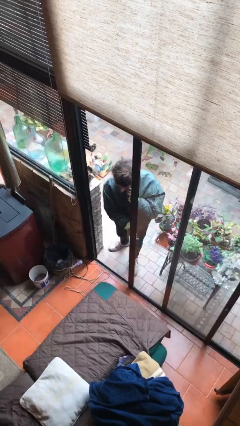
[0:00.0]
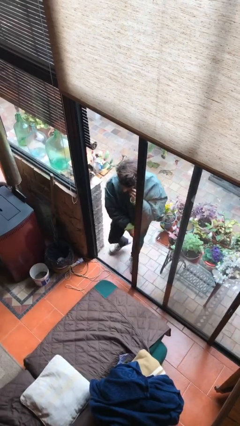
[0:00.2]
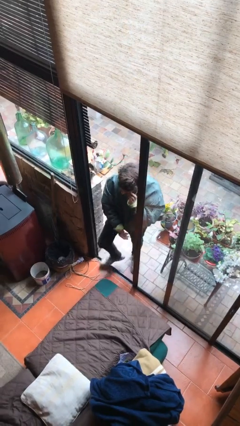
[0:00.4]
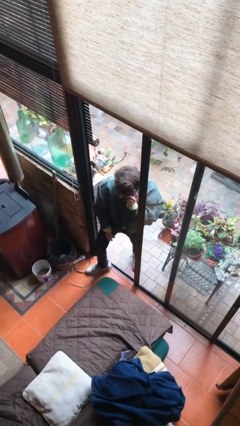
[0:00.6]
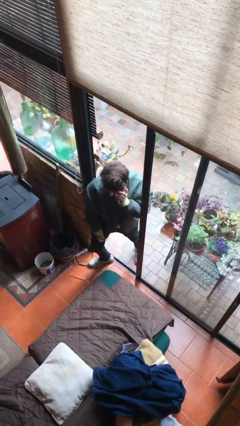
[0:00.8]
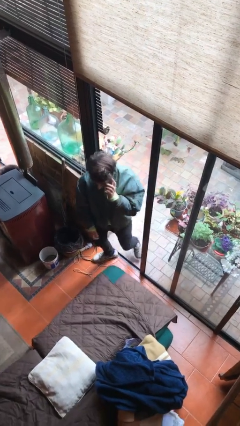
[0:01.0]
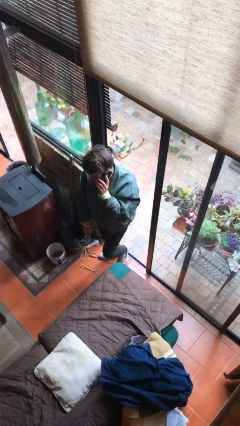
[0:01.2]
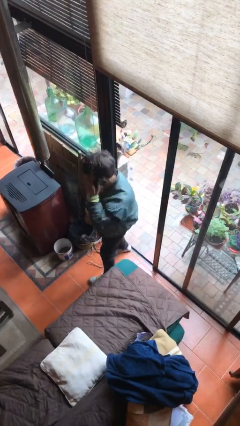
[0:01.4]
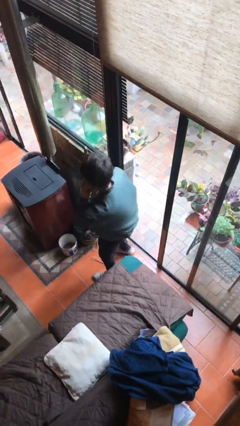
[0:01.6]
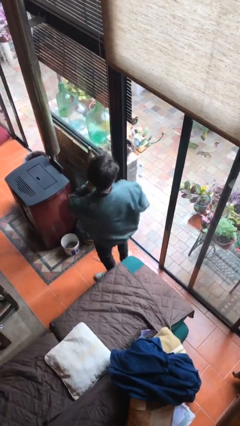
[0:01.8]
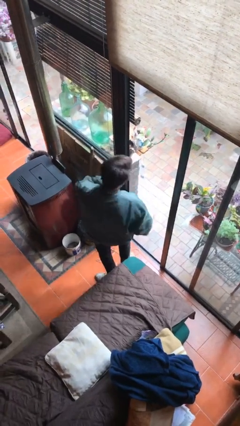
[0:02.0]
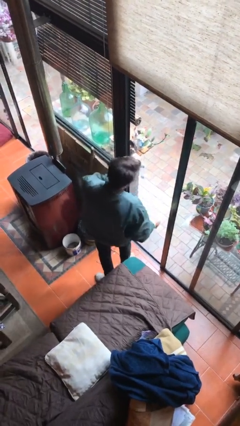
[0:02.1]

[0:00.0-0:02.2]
person enters scene through structure

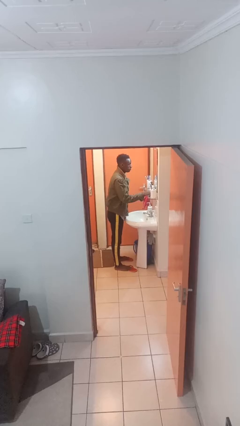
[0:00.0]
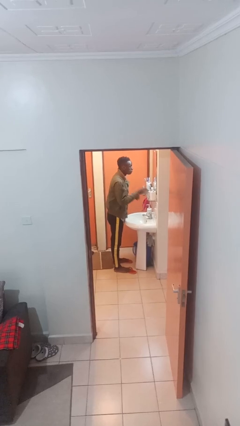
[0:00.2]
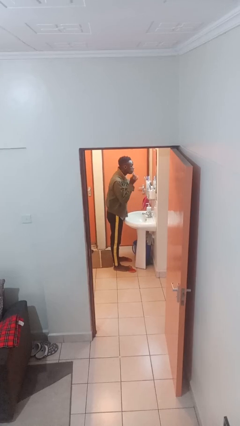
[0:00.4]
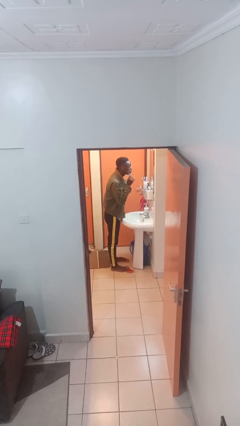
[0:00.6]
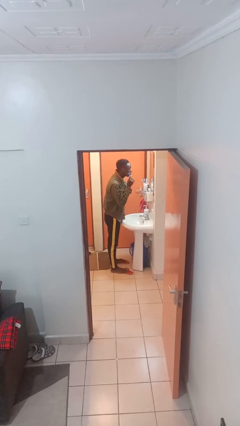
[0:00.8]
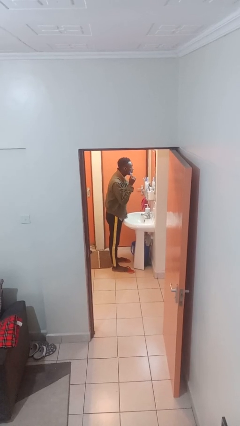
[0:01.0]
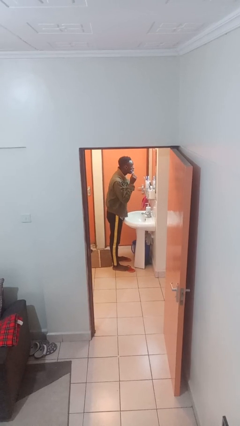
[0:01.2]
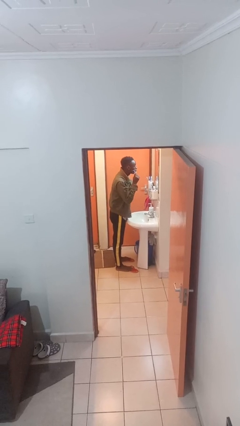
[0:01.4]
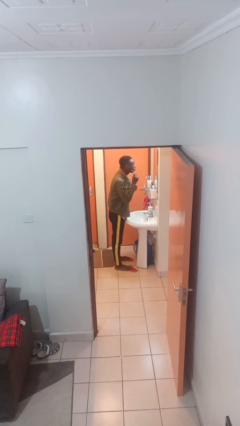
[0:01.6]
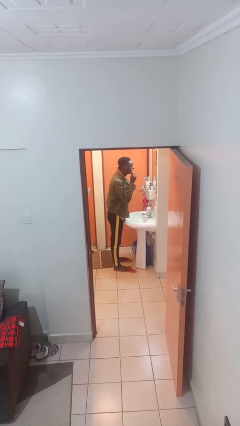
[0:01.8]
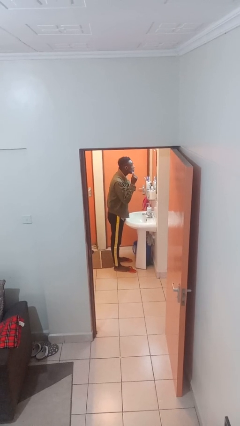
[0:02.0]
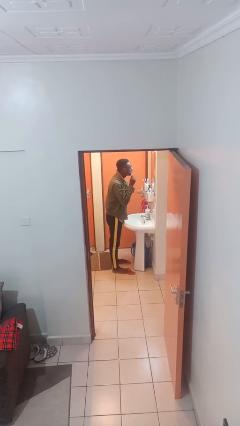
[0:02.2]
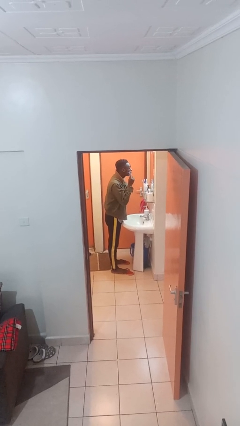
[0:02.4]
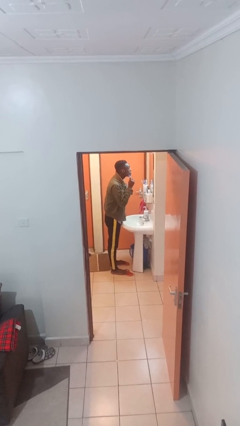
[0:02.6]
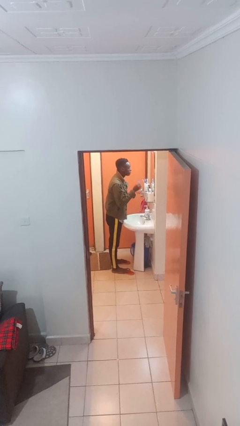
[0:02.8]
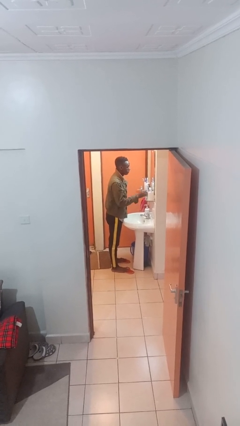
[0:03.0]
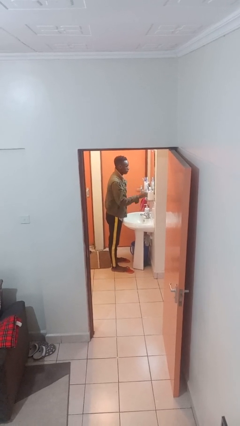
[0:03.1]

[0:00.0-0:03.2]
person shaves face

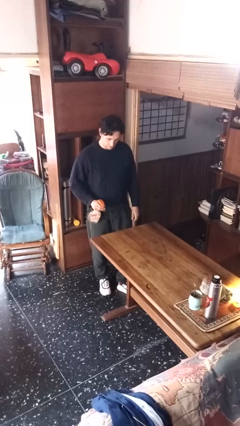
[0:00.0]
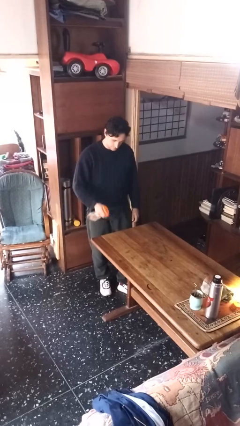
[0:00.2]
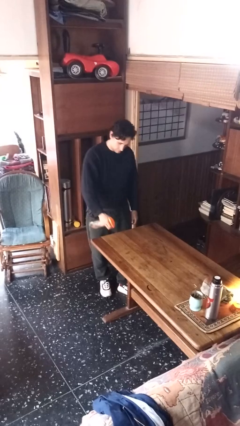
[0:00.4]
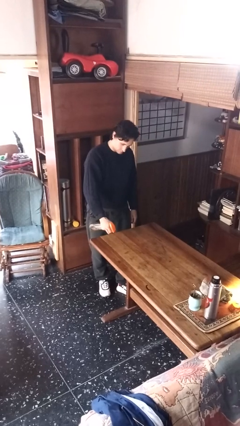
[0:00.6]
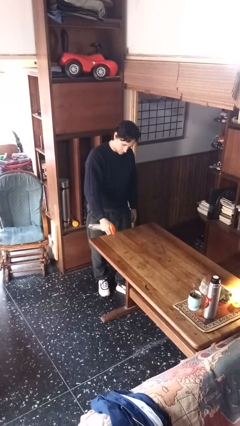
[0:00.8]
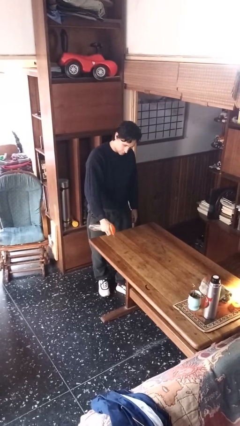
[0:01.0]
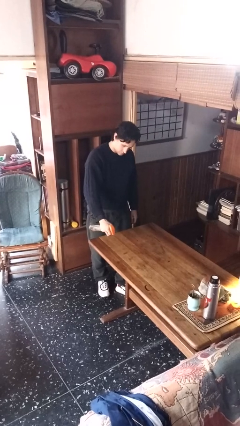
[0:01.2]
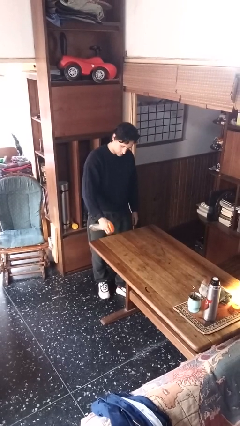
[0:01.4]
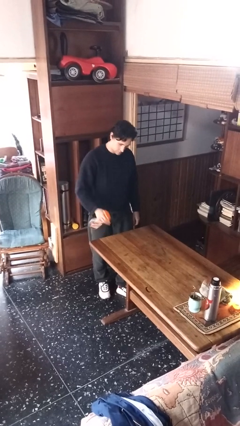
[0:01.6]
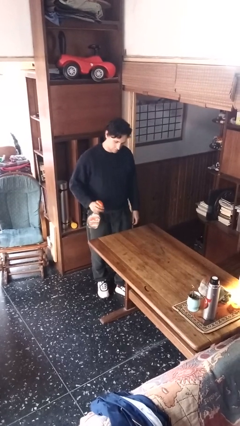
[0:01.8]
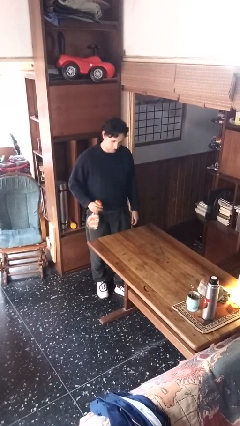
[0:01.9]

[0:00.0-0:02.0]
person sprays from bottle

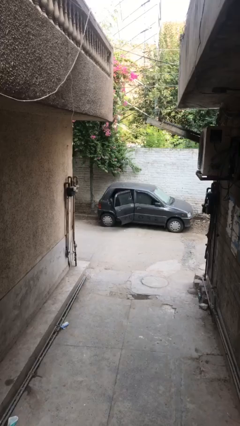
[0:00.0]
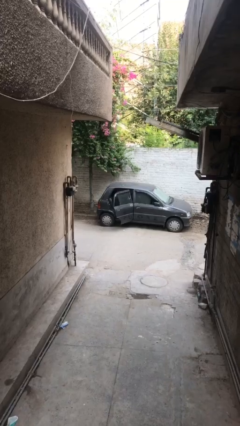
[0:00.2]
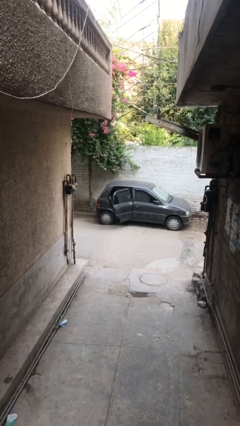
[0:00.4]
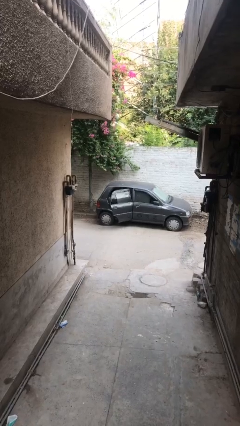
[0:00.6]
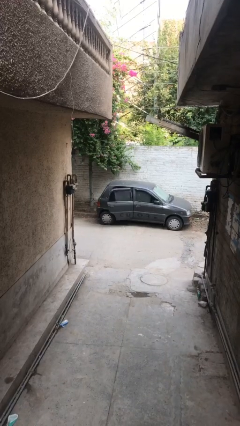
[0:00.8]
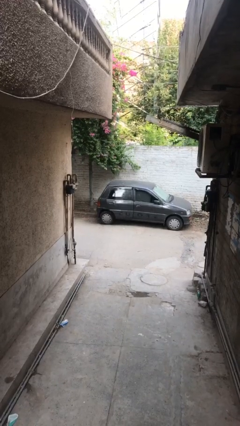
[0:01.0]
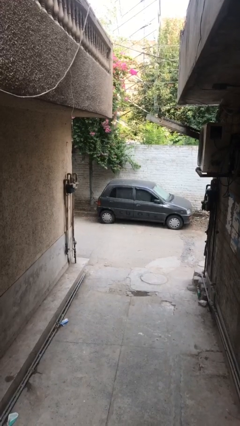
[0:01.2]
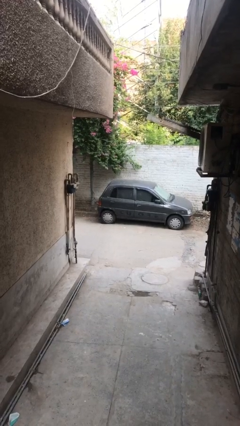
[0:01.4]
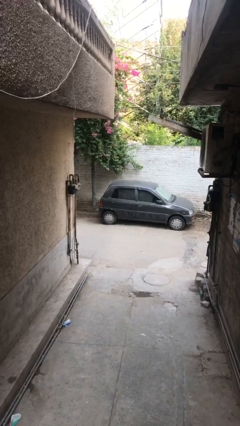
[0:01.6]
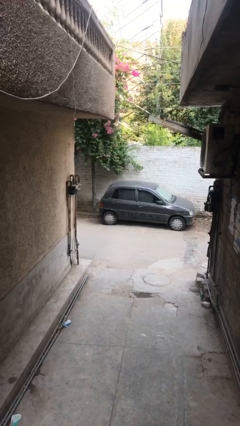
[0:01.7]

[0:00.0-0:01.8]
person closes car door

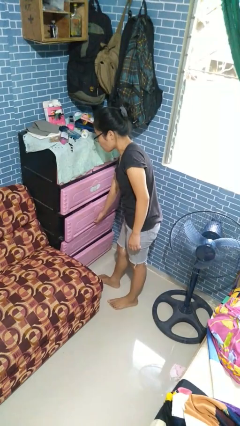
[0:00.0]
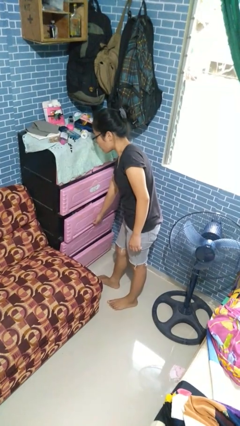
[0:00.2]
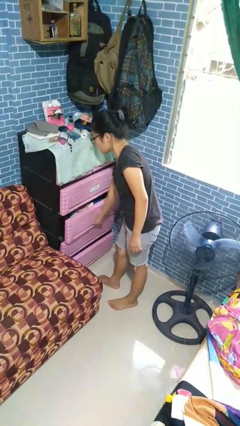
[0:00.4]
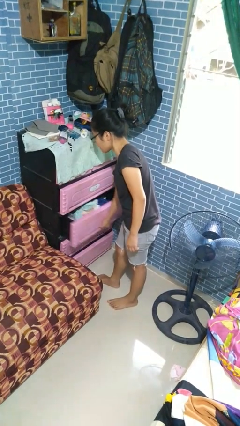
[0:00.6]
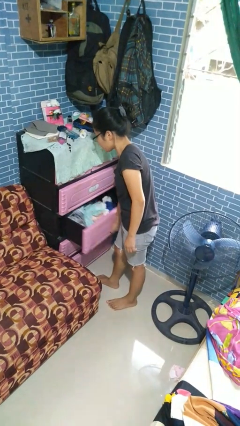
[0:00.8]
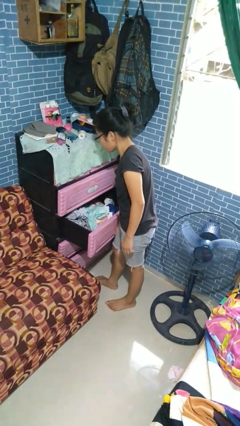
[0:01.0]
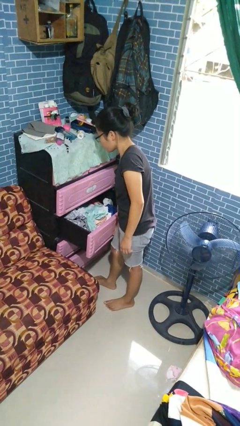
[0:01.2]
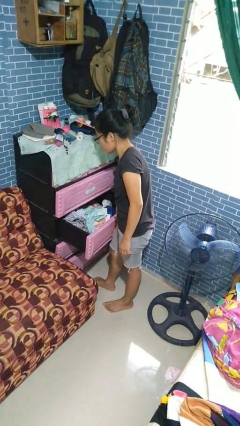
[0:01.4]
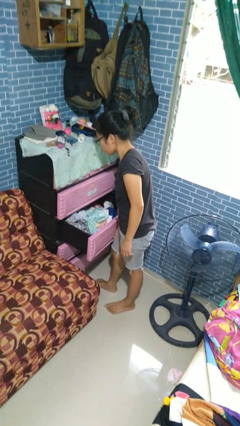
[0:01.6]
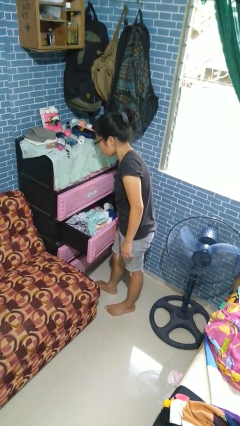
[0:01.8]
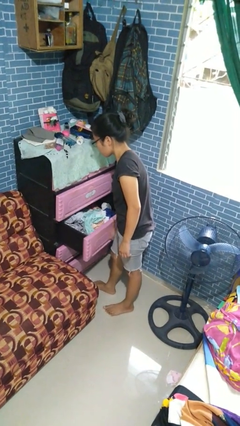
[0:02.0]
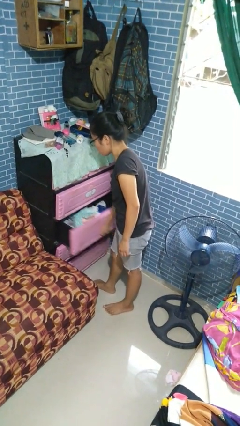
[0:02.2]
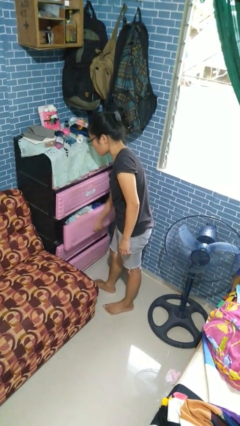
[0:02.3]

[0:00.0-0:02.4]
person opens dresser drawer

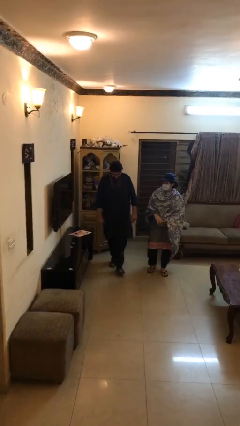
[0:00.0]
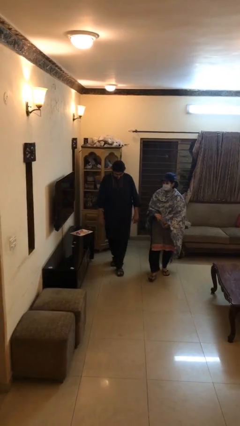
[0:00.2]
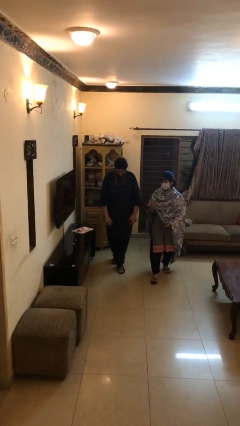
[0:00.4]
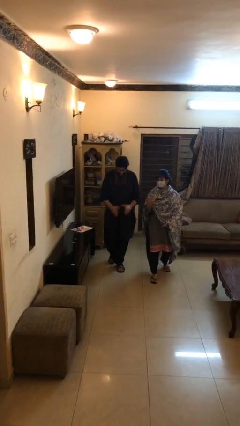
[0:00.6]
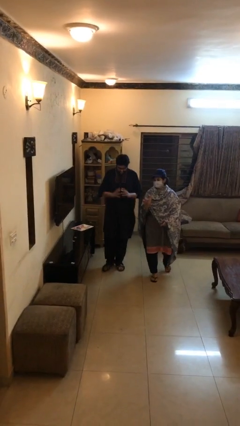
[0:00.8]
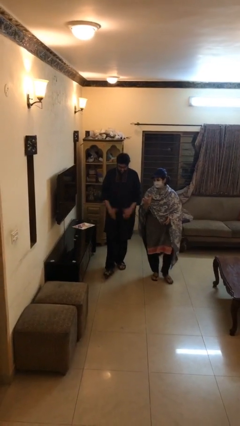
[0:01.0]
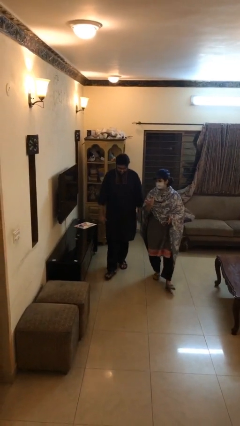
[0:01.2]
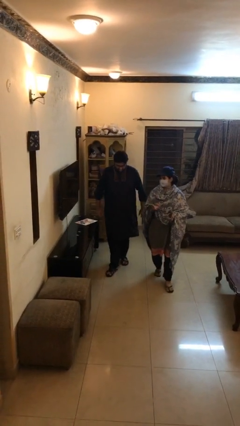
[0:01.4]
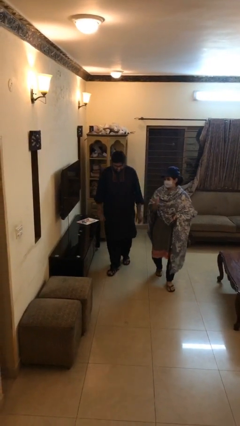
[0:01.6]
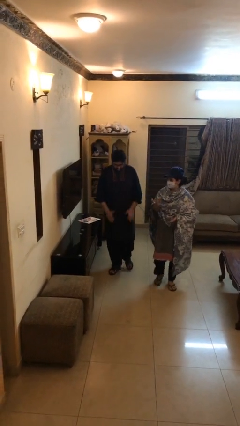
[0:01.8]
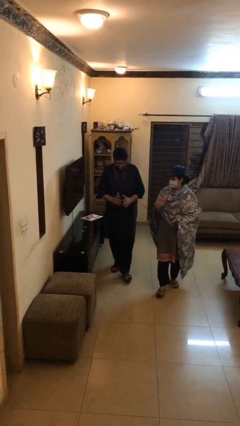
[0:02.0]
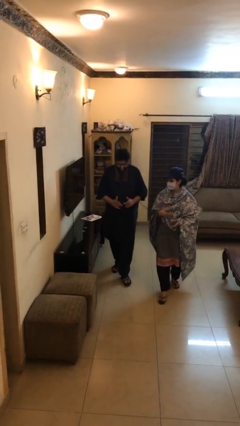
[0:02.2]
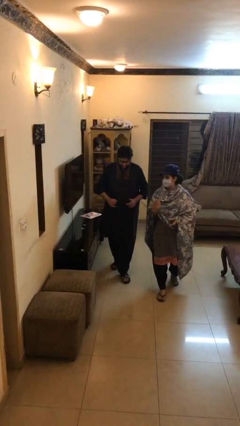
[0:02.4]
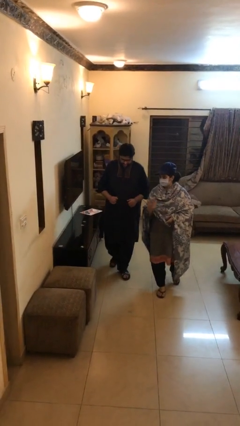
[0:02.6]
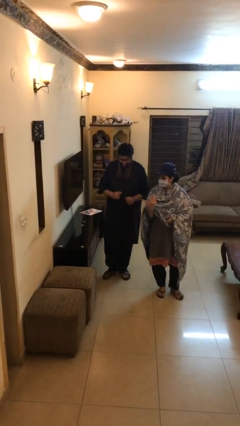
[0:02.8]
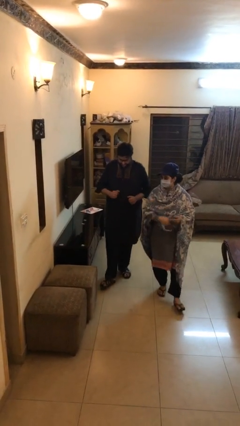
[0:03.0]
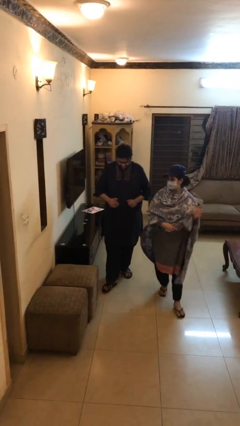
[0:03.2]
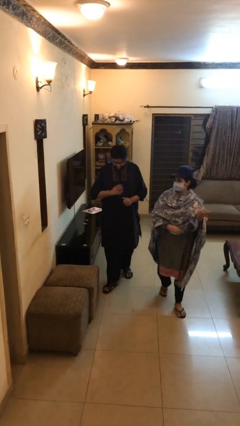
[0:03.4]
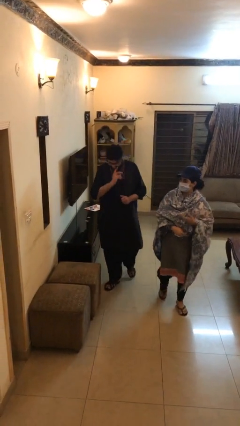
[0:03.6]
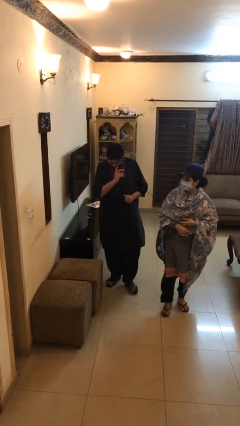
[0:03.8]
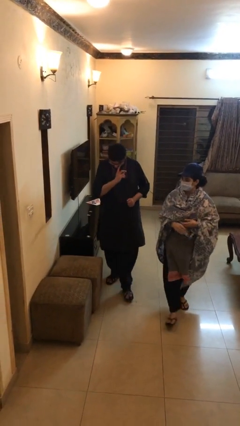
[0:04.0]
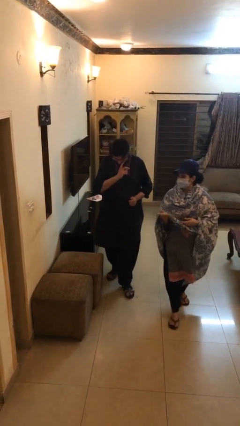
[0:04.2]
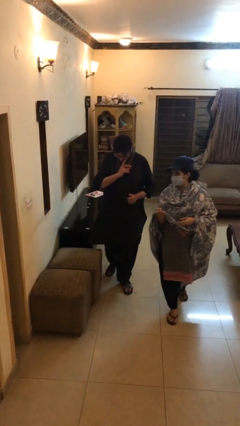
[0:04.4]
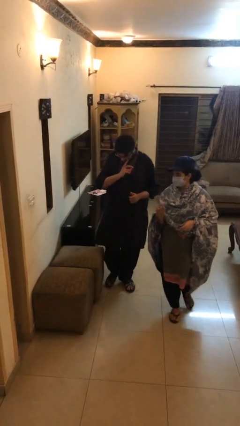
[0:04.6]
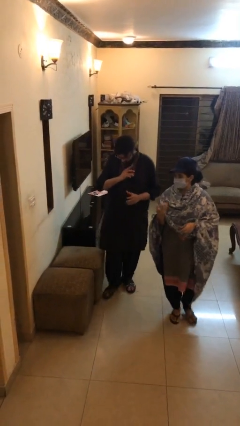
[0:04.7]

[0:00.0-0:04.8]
person talks to person

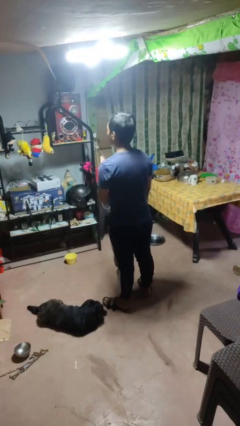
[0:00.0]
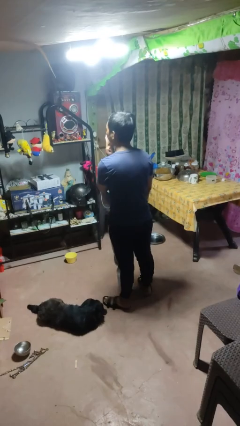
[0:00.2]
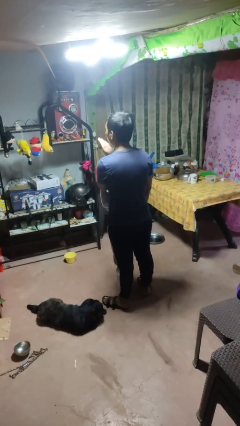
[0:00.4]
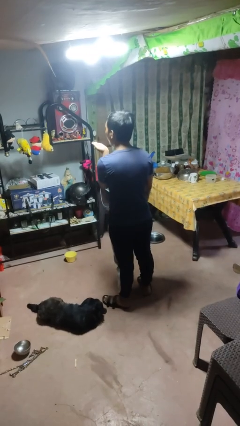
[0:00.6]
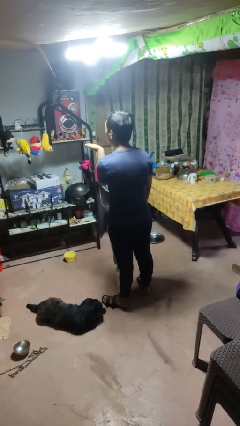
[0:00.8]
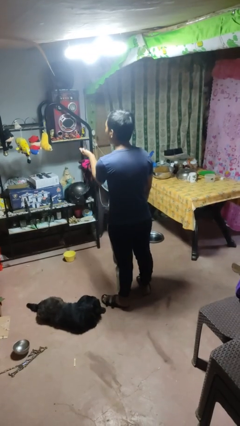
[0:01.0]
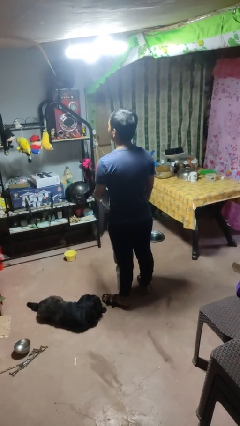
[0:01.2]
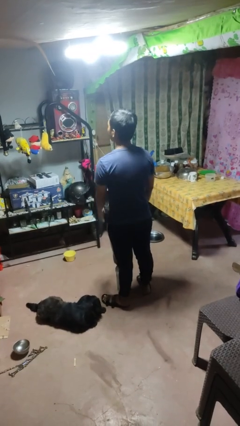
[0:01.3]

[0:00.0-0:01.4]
person gestures blow kiss
